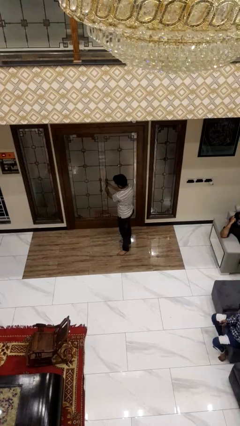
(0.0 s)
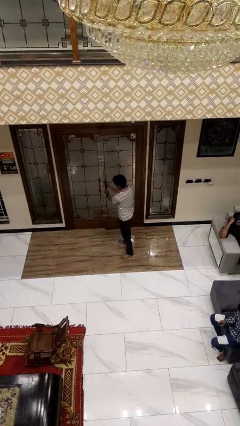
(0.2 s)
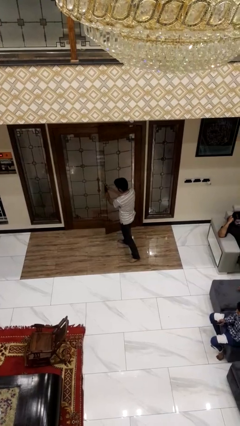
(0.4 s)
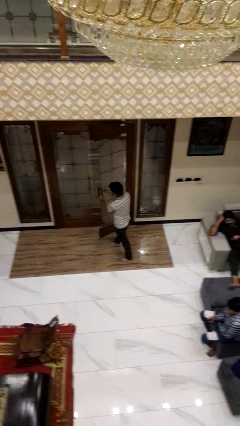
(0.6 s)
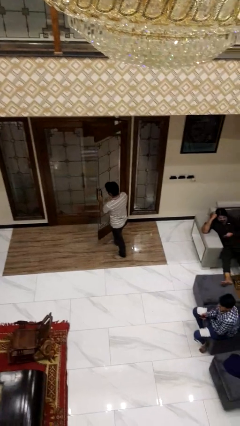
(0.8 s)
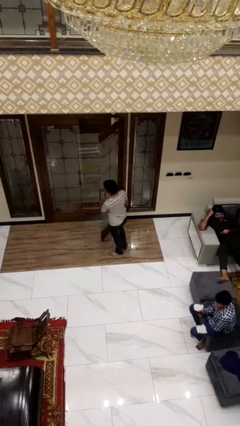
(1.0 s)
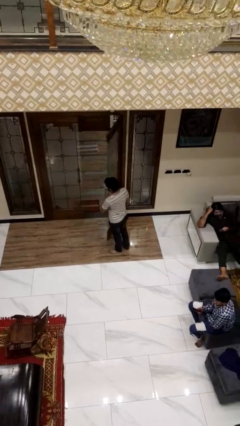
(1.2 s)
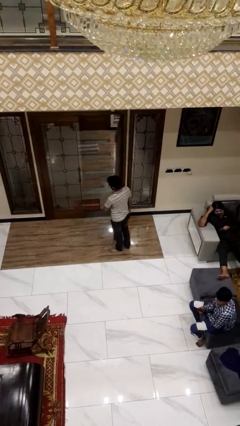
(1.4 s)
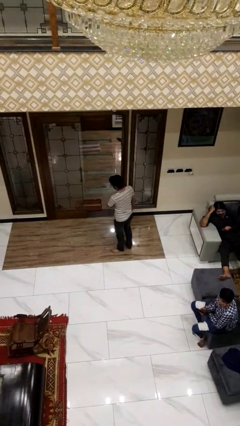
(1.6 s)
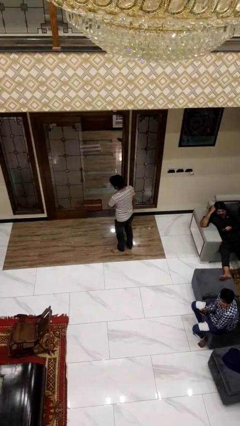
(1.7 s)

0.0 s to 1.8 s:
person opens facility door

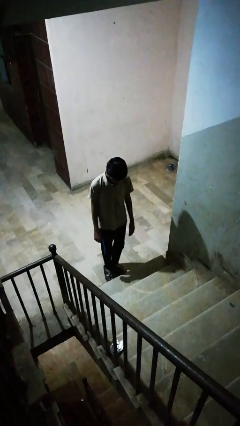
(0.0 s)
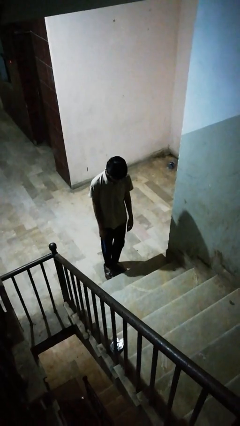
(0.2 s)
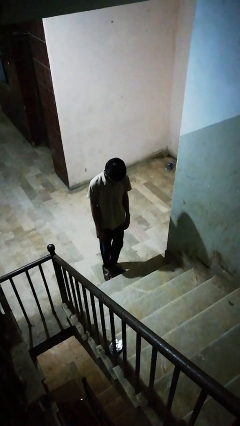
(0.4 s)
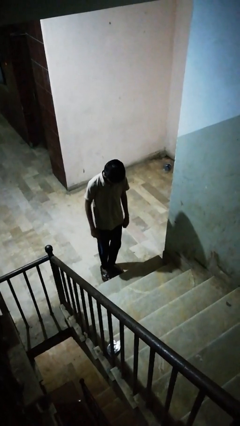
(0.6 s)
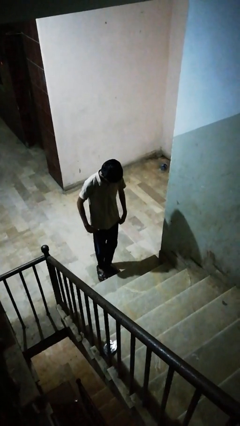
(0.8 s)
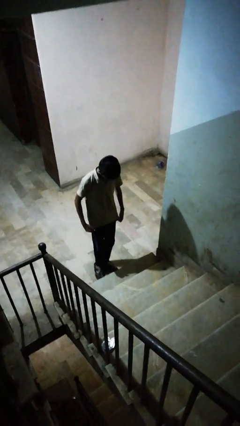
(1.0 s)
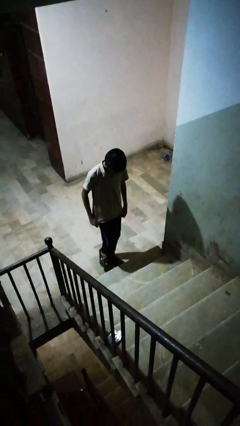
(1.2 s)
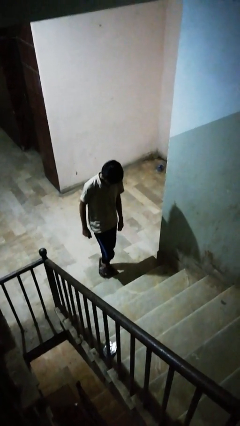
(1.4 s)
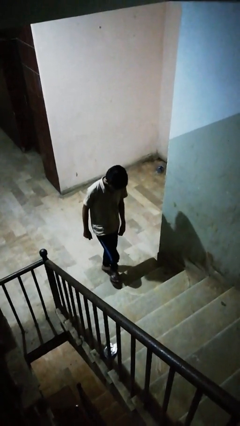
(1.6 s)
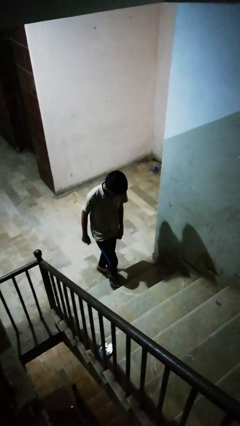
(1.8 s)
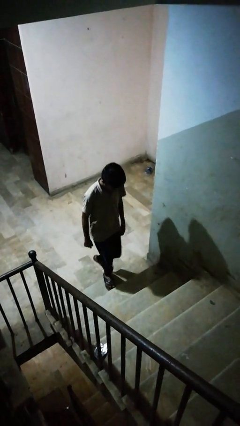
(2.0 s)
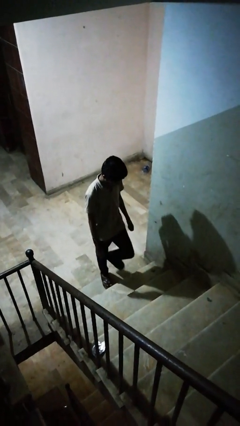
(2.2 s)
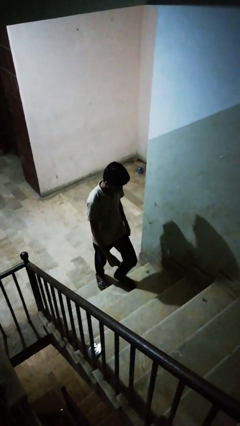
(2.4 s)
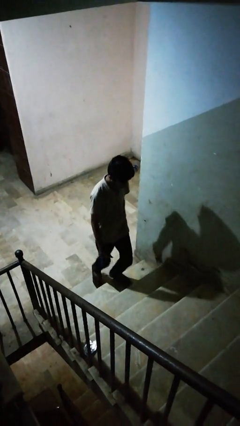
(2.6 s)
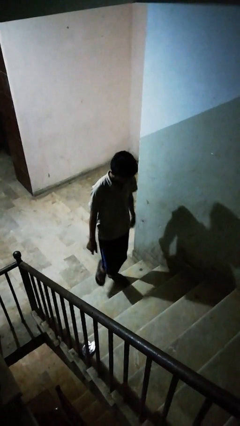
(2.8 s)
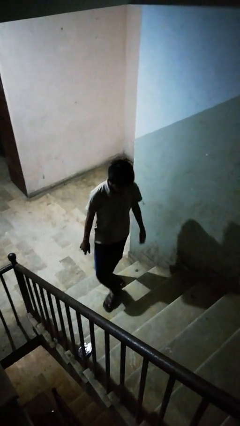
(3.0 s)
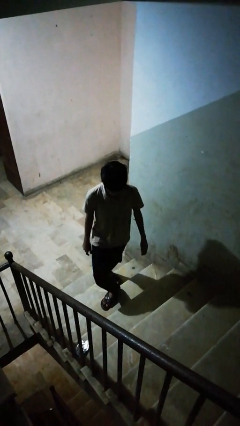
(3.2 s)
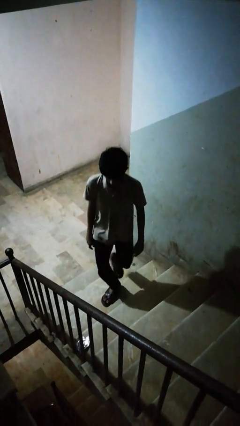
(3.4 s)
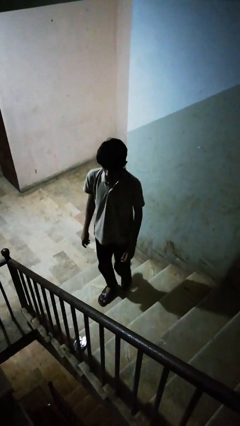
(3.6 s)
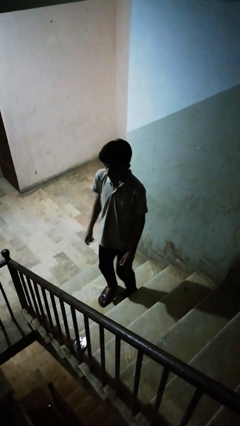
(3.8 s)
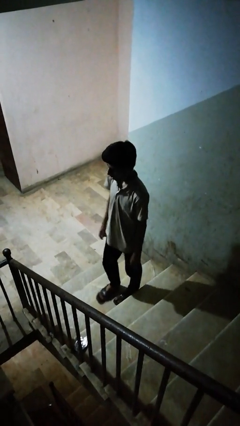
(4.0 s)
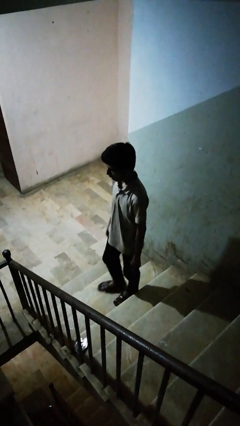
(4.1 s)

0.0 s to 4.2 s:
person climbs up stairs

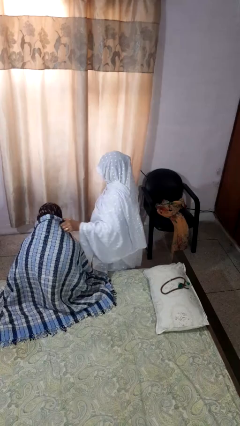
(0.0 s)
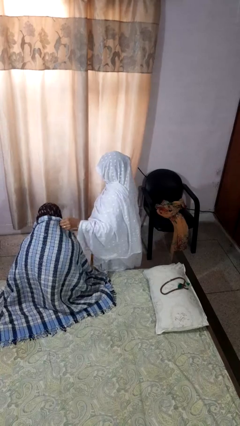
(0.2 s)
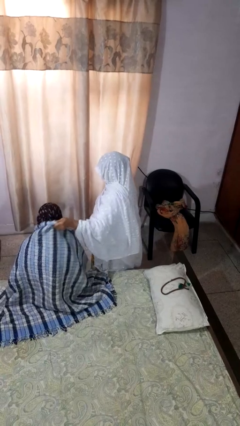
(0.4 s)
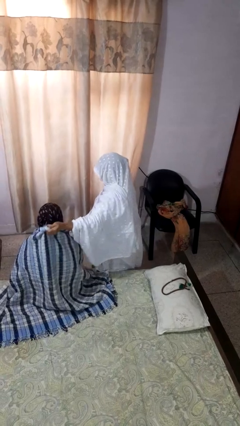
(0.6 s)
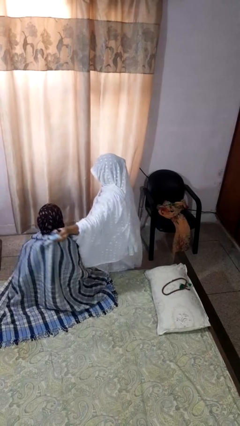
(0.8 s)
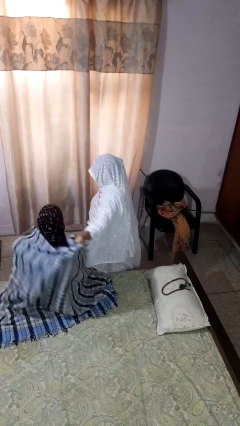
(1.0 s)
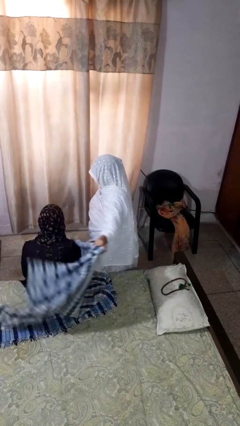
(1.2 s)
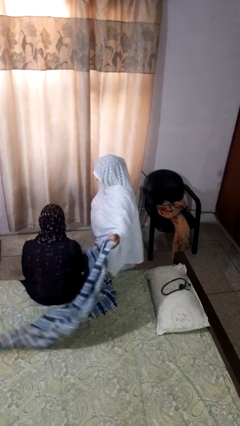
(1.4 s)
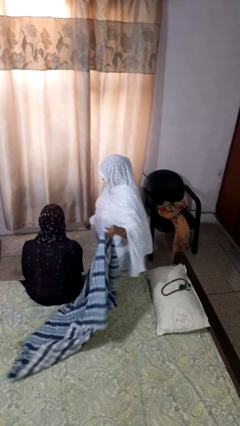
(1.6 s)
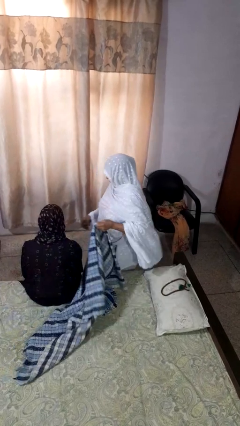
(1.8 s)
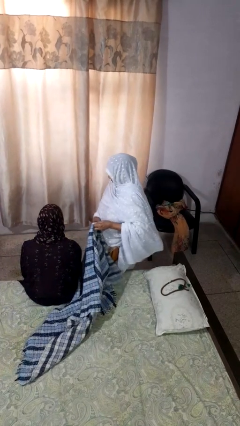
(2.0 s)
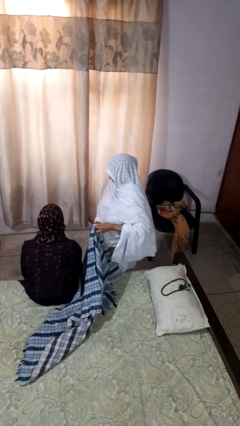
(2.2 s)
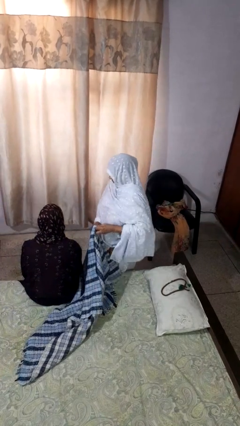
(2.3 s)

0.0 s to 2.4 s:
person uncovers friend with blanket

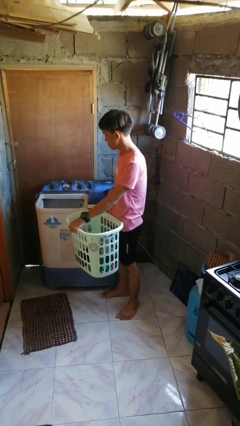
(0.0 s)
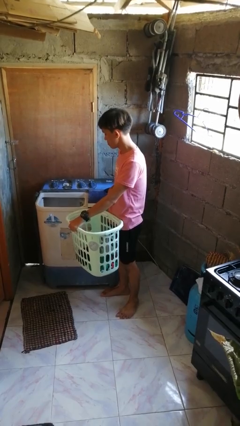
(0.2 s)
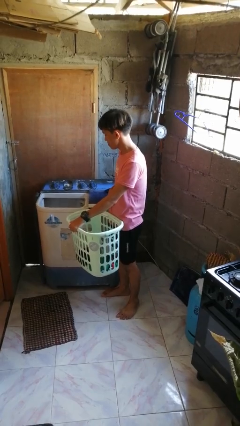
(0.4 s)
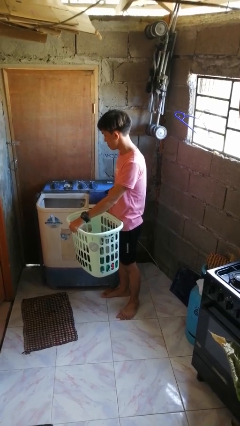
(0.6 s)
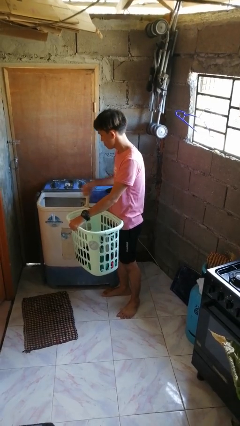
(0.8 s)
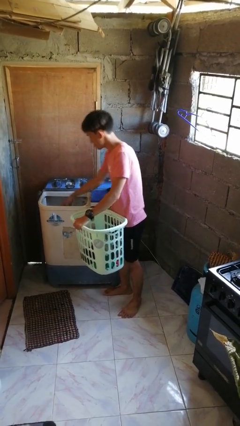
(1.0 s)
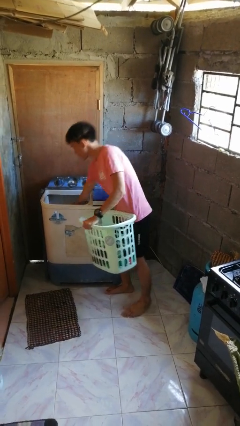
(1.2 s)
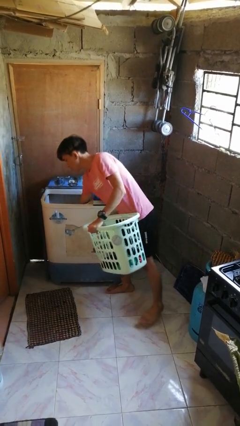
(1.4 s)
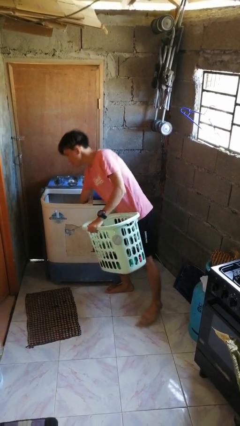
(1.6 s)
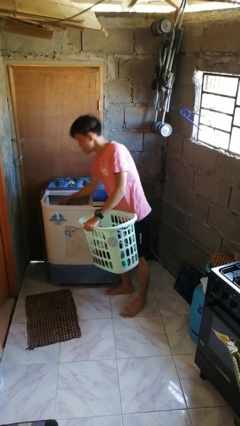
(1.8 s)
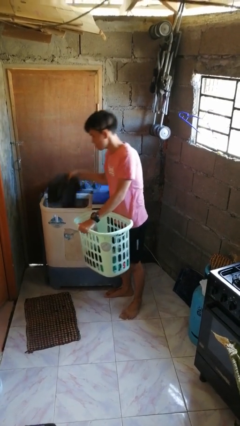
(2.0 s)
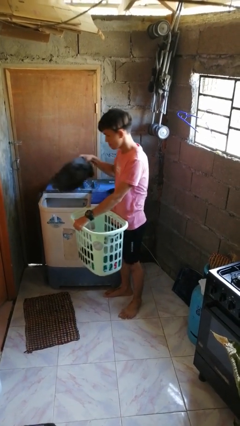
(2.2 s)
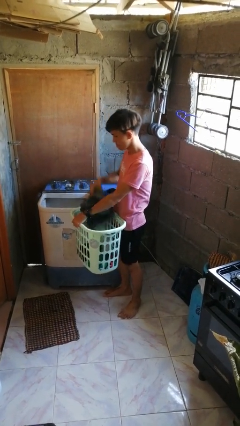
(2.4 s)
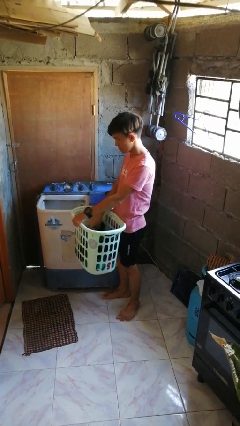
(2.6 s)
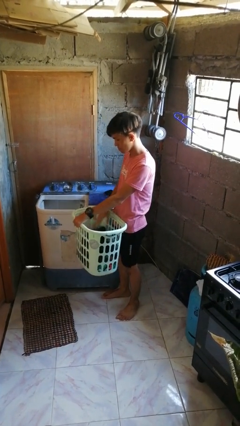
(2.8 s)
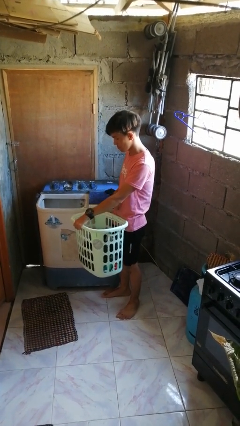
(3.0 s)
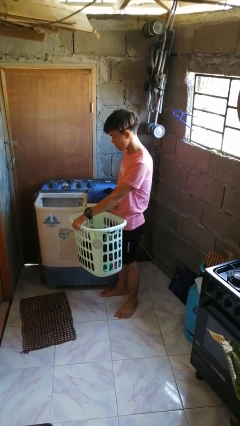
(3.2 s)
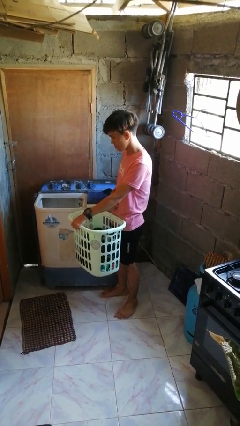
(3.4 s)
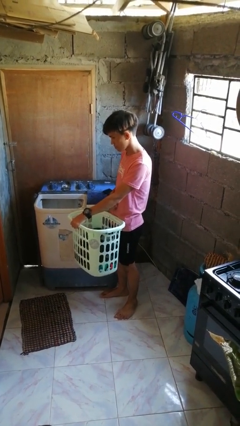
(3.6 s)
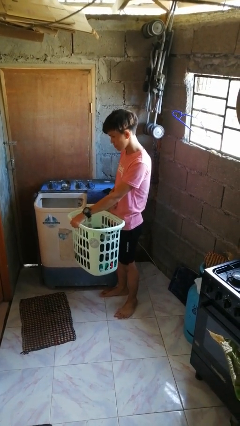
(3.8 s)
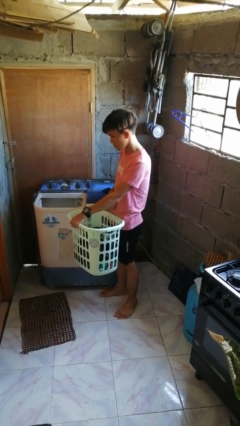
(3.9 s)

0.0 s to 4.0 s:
person loads clotheswasher

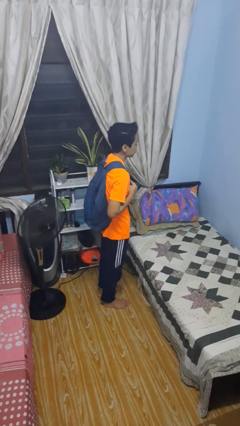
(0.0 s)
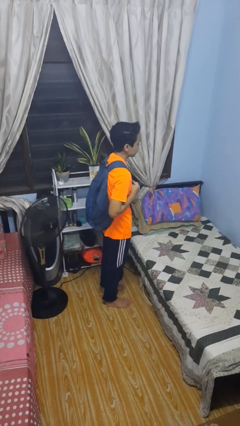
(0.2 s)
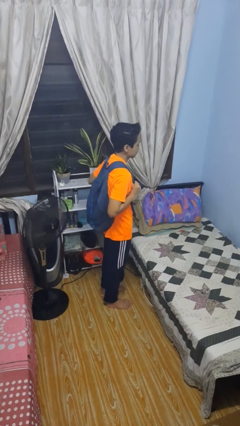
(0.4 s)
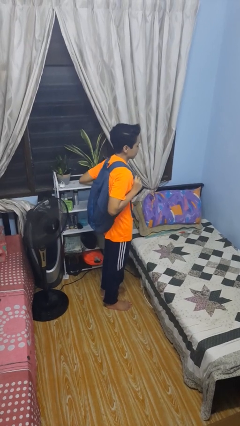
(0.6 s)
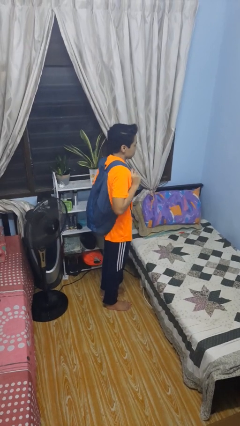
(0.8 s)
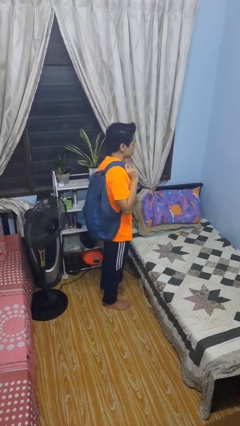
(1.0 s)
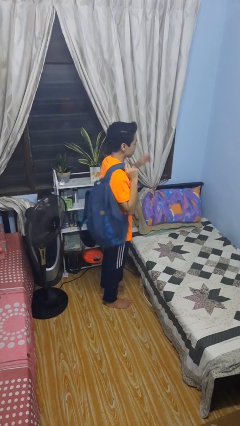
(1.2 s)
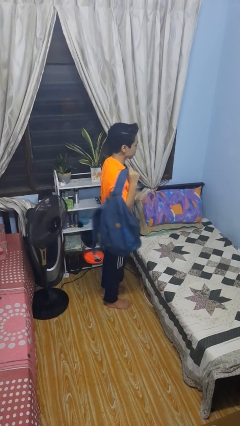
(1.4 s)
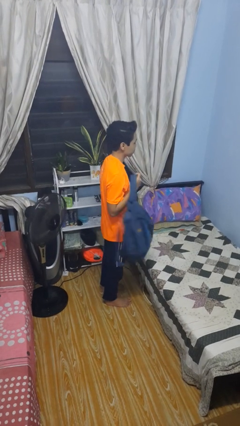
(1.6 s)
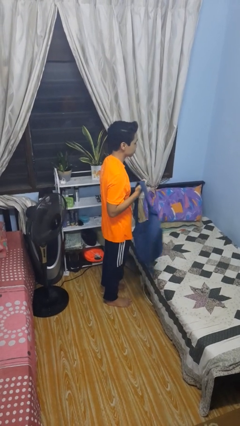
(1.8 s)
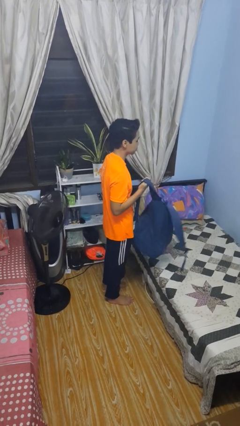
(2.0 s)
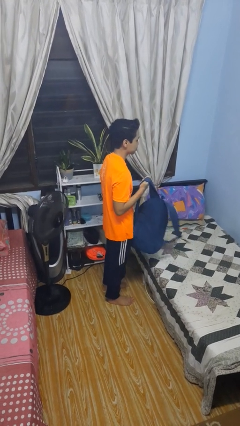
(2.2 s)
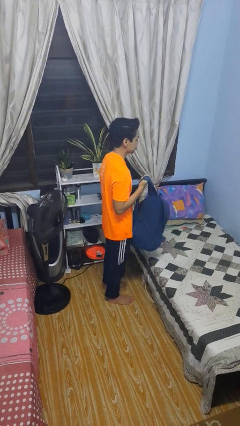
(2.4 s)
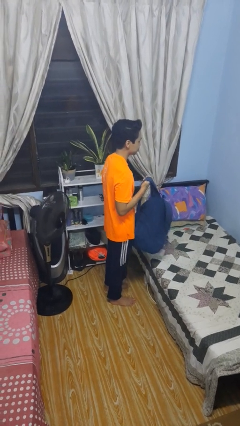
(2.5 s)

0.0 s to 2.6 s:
person takes off backpack

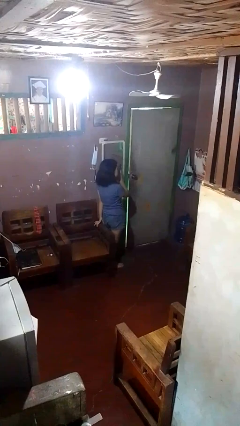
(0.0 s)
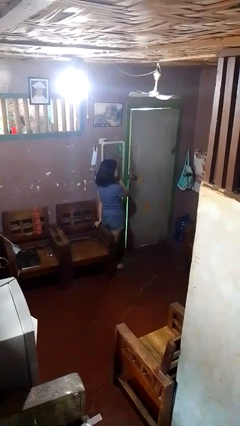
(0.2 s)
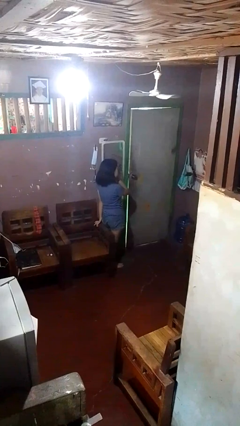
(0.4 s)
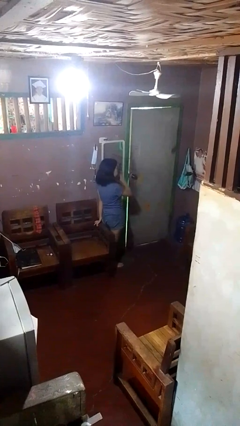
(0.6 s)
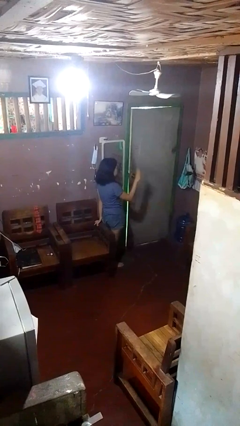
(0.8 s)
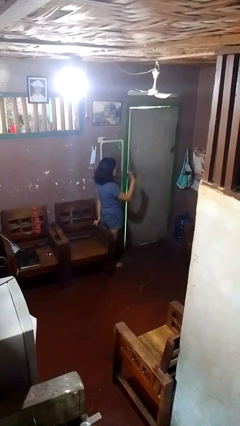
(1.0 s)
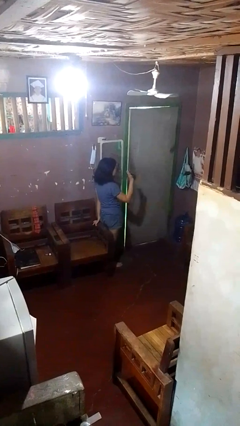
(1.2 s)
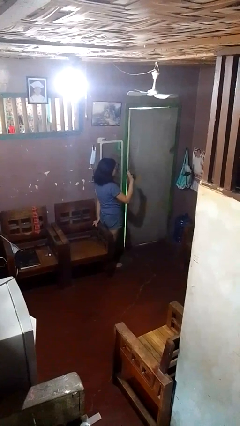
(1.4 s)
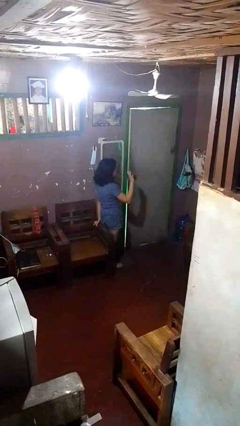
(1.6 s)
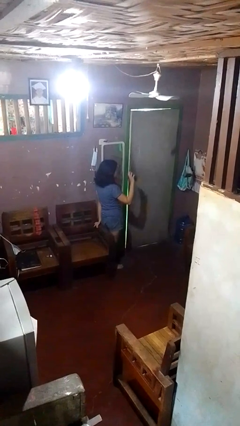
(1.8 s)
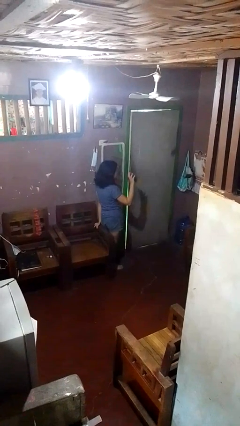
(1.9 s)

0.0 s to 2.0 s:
person gestures swipe right
